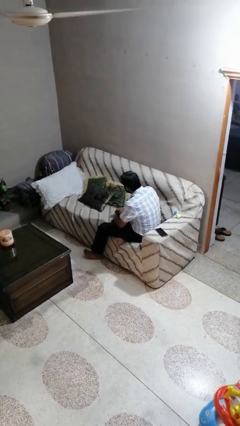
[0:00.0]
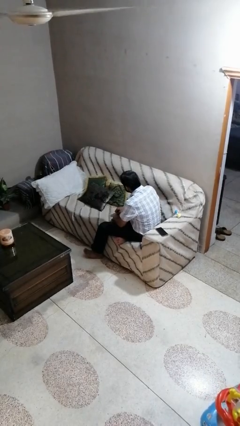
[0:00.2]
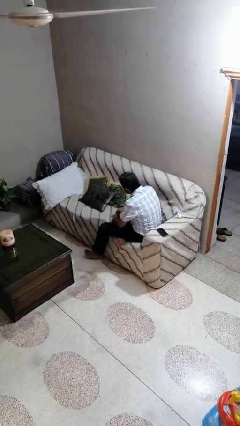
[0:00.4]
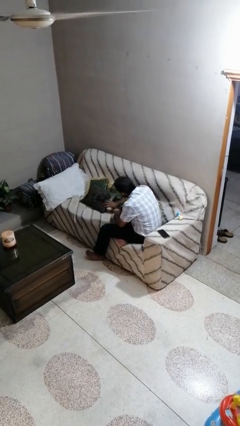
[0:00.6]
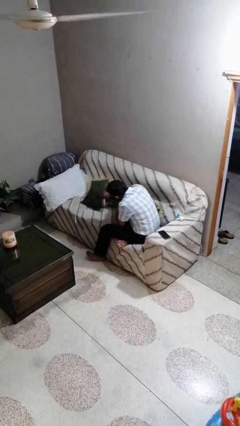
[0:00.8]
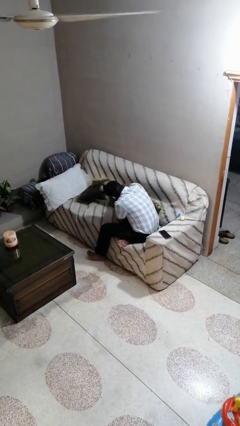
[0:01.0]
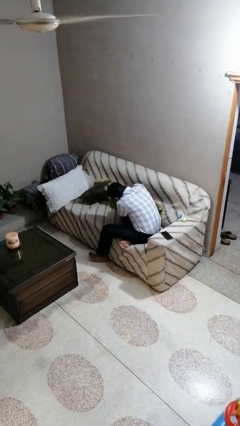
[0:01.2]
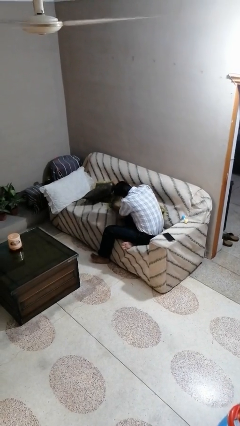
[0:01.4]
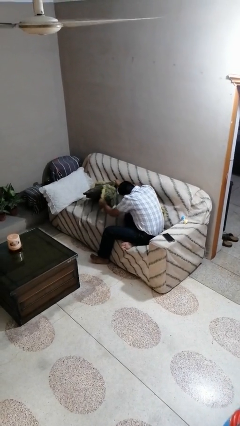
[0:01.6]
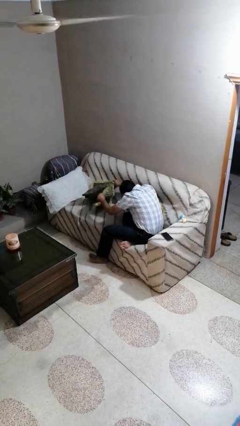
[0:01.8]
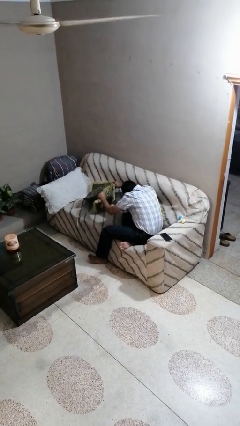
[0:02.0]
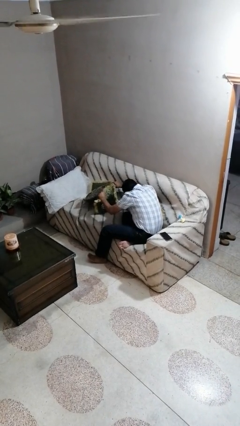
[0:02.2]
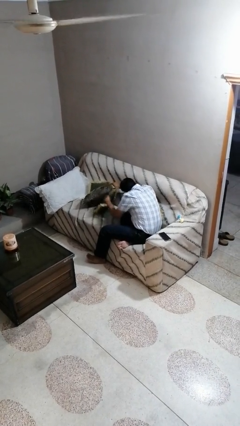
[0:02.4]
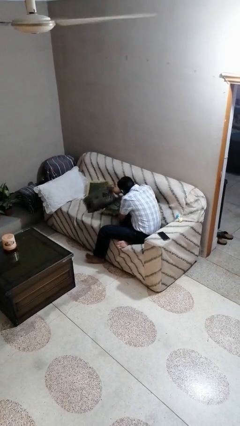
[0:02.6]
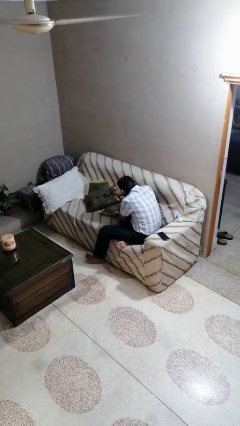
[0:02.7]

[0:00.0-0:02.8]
person searches in couch

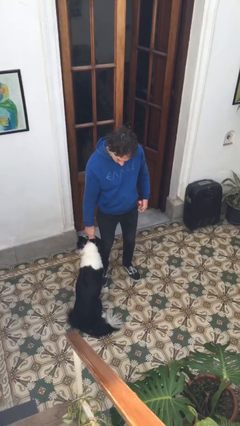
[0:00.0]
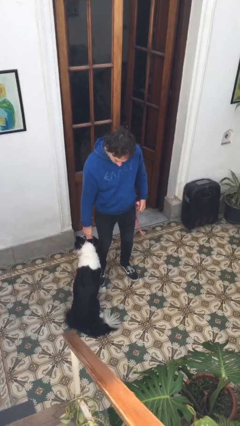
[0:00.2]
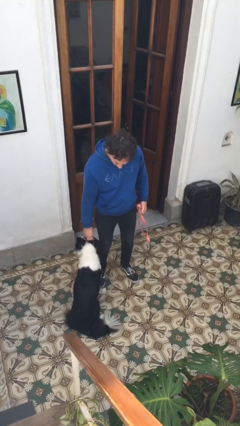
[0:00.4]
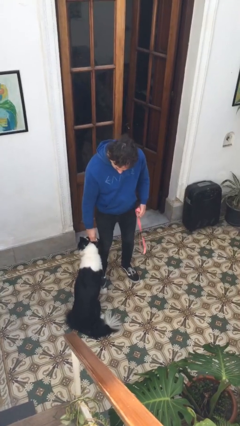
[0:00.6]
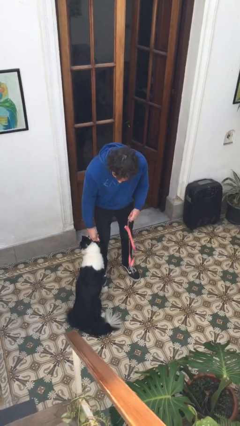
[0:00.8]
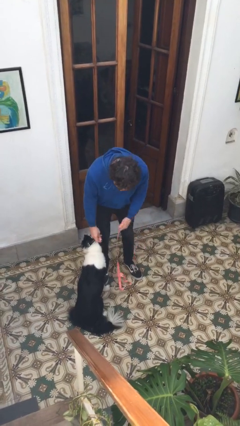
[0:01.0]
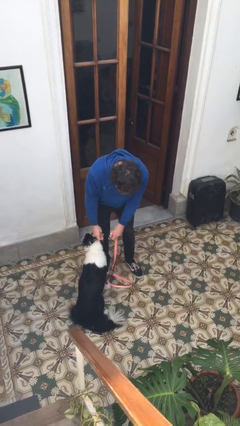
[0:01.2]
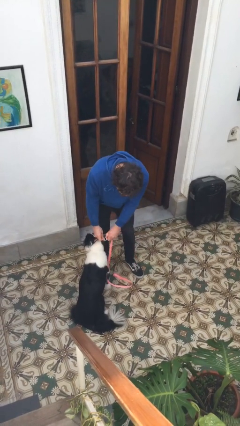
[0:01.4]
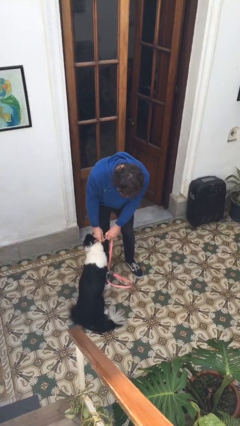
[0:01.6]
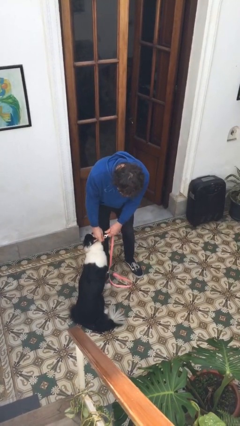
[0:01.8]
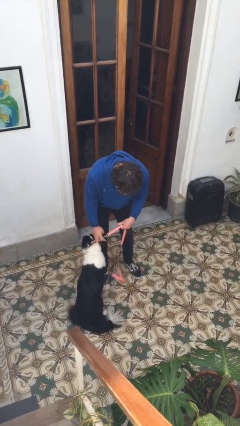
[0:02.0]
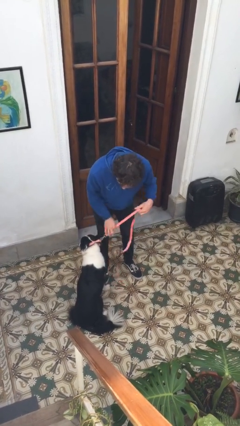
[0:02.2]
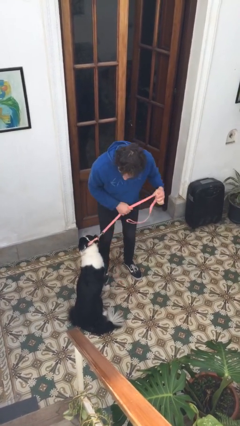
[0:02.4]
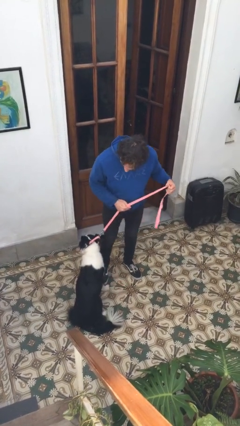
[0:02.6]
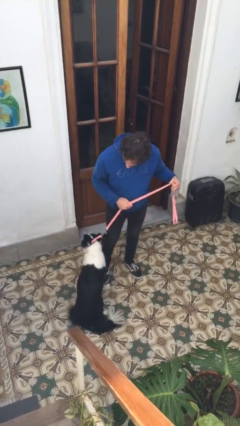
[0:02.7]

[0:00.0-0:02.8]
person attaches leash to dog

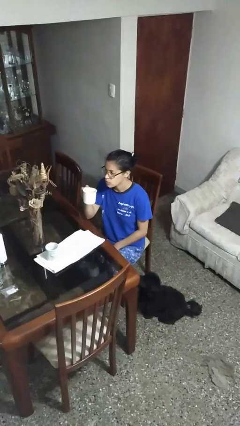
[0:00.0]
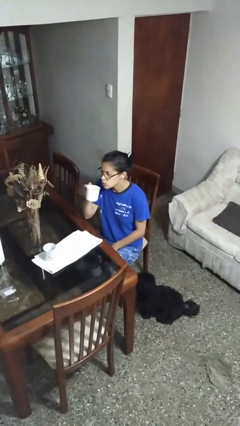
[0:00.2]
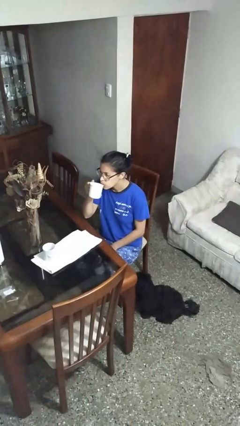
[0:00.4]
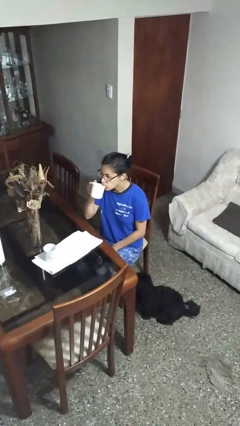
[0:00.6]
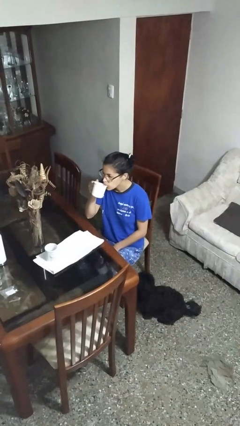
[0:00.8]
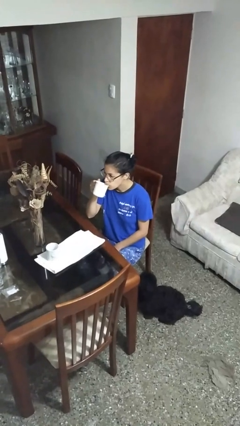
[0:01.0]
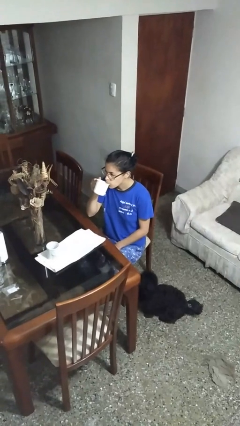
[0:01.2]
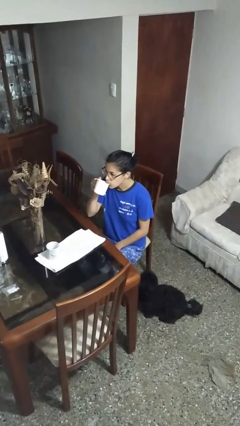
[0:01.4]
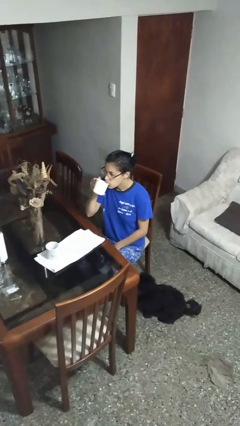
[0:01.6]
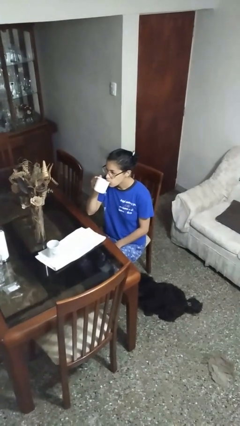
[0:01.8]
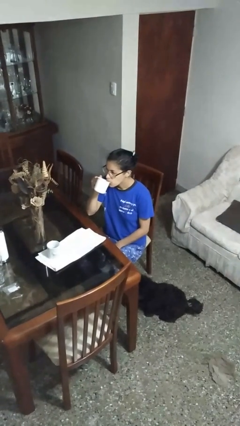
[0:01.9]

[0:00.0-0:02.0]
person drinks from mug

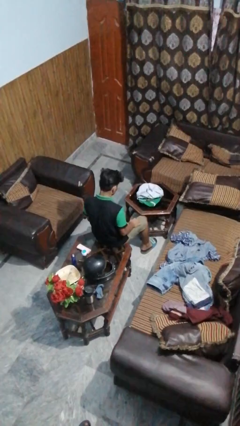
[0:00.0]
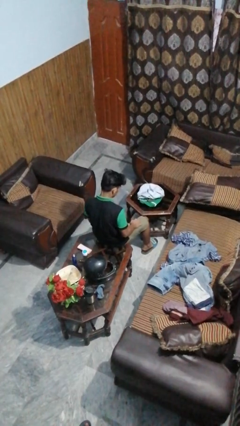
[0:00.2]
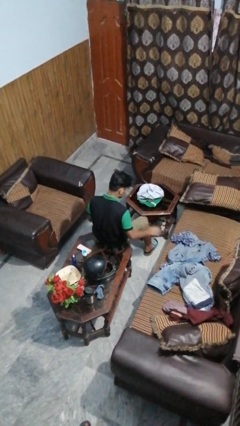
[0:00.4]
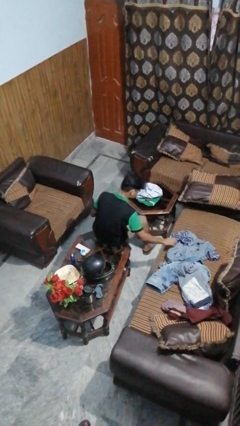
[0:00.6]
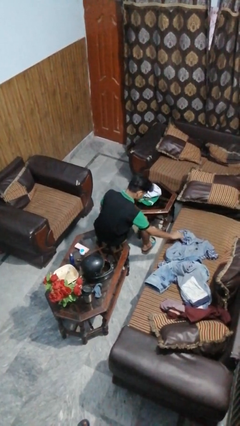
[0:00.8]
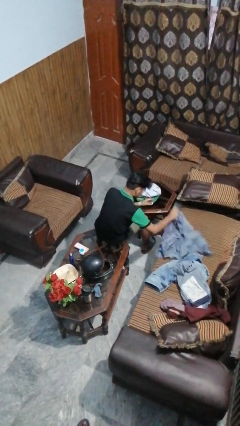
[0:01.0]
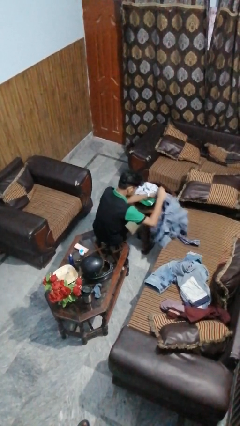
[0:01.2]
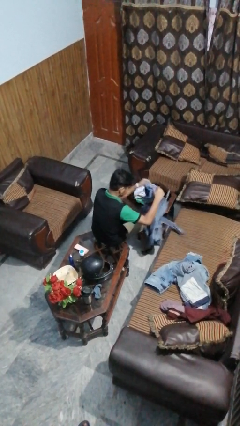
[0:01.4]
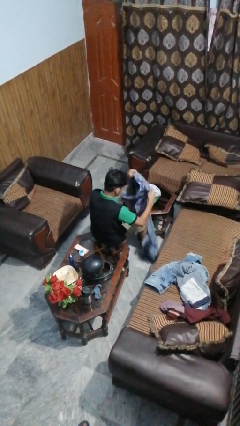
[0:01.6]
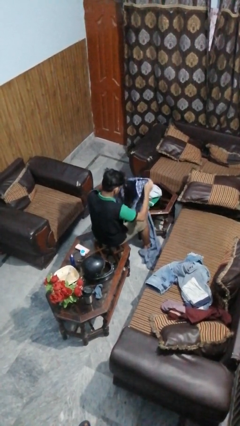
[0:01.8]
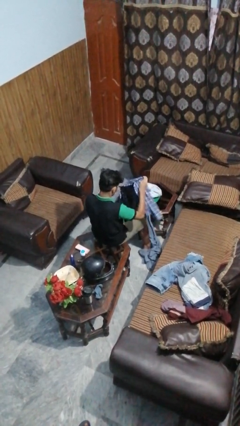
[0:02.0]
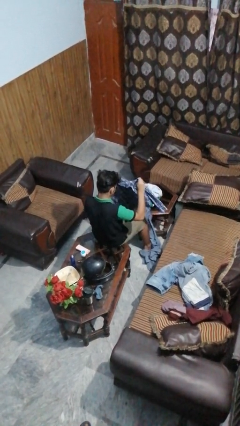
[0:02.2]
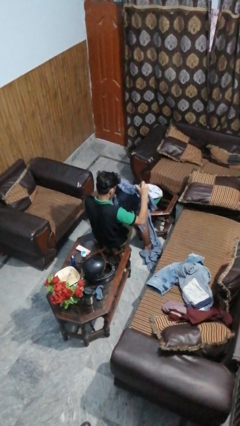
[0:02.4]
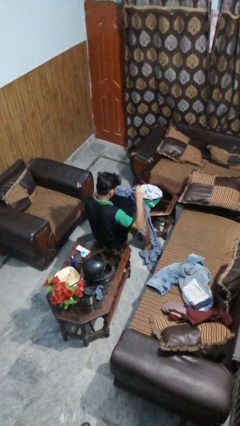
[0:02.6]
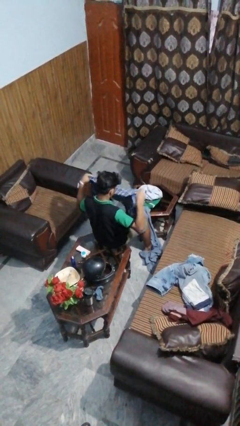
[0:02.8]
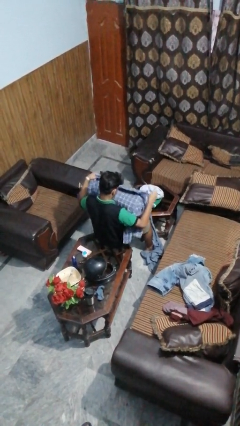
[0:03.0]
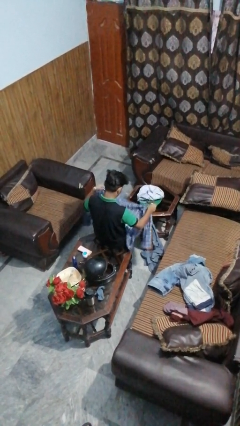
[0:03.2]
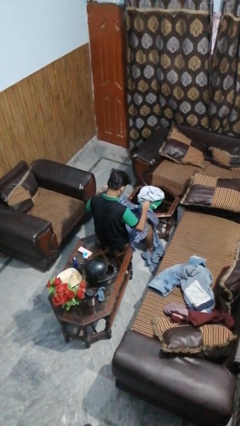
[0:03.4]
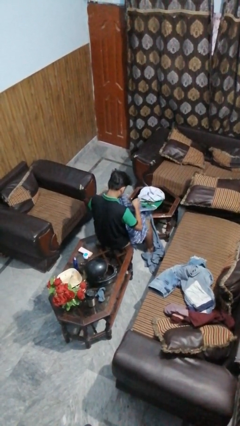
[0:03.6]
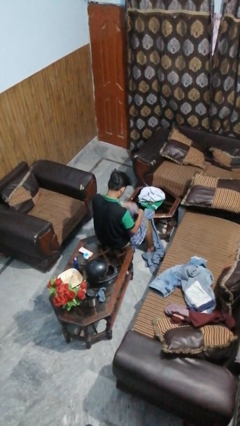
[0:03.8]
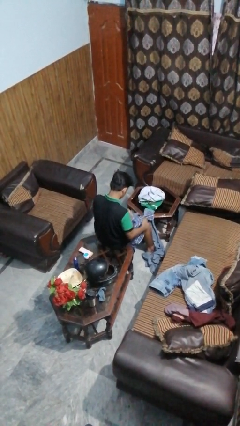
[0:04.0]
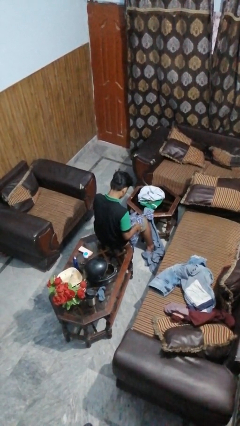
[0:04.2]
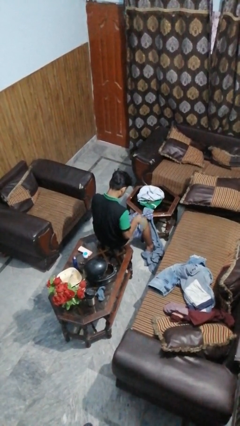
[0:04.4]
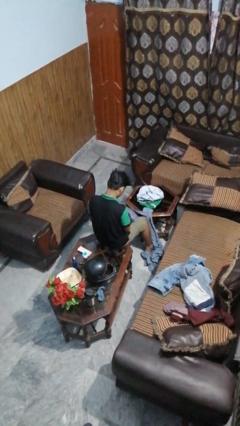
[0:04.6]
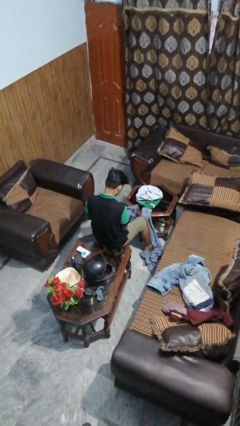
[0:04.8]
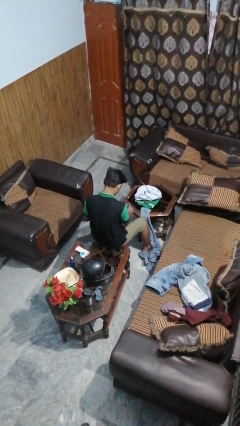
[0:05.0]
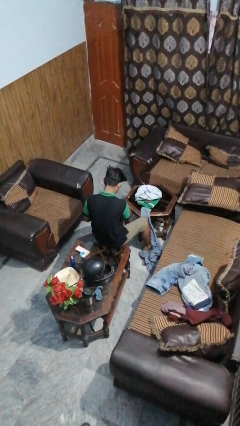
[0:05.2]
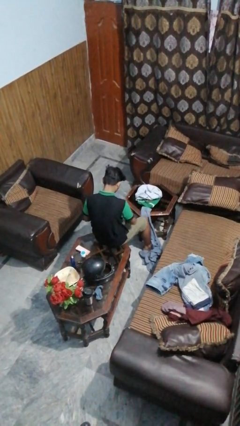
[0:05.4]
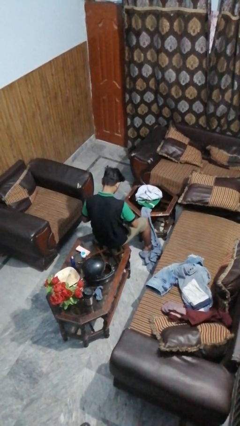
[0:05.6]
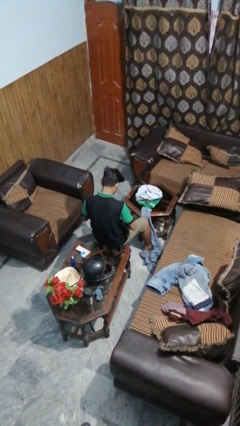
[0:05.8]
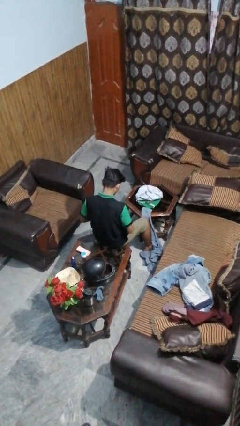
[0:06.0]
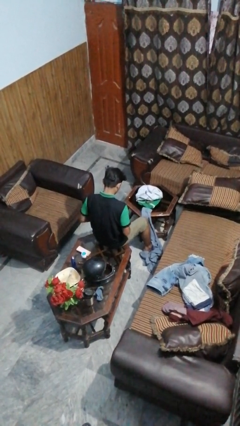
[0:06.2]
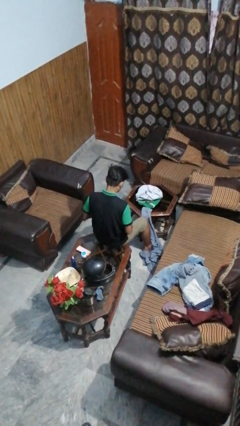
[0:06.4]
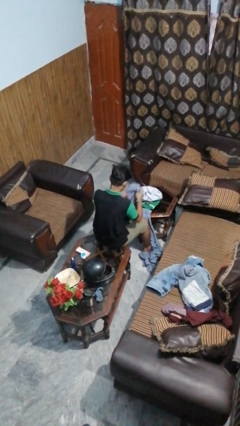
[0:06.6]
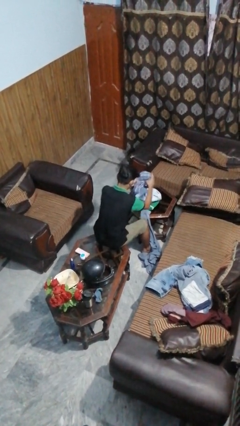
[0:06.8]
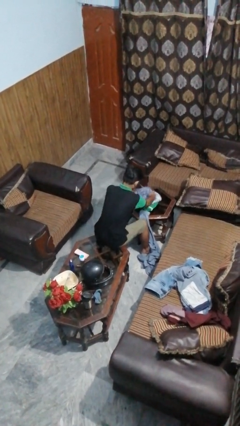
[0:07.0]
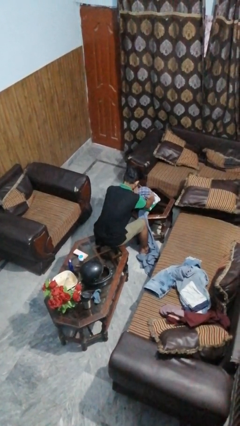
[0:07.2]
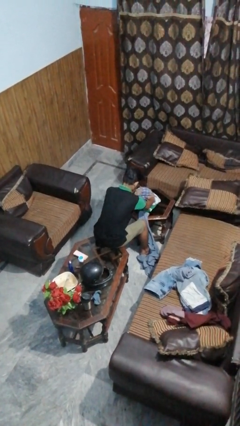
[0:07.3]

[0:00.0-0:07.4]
person folds shirt

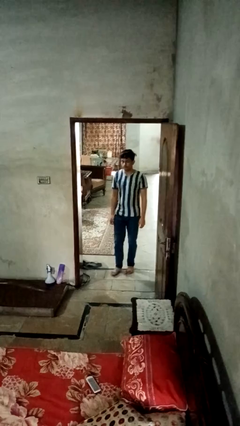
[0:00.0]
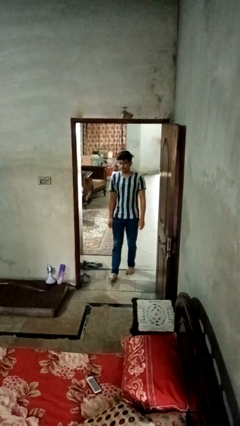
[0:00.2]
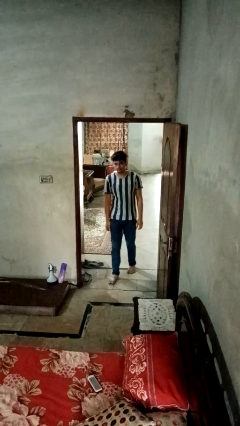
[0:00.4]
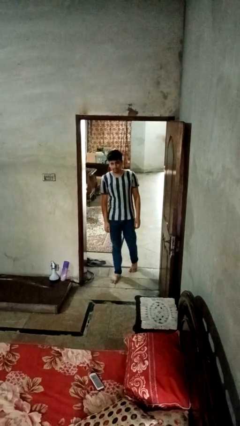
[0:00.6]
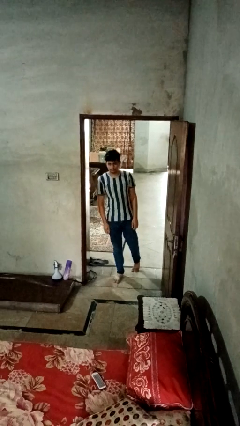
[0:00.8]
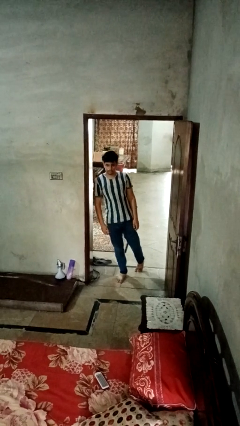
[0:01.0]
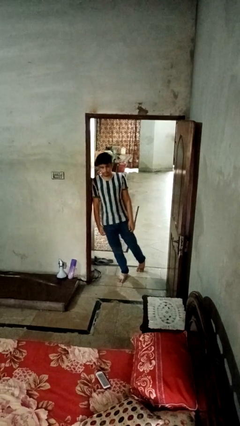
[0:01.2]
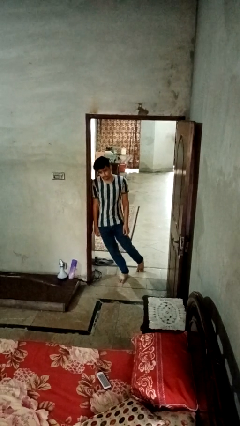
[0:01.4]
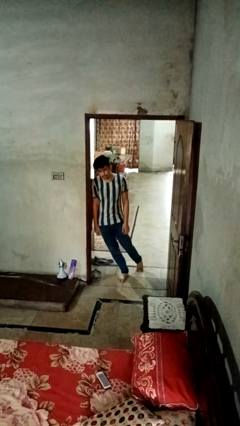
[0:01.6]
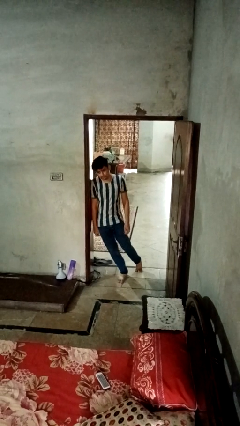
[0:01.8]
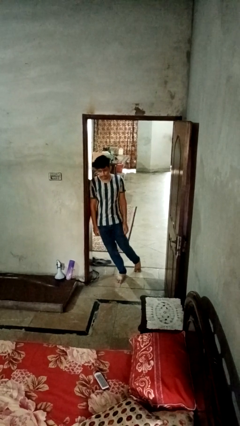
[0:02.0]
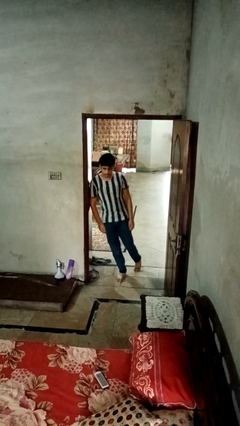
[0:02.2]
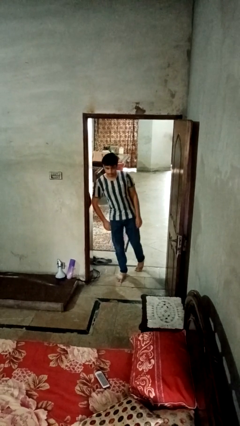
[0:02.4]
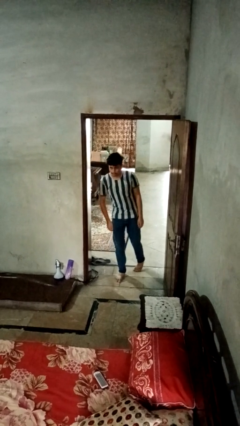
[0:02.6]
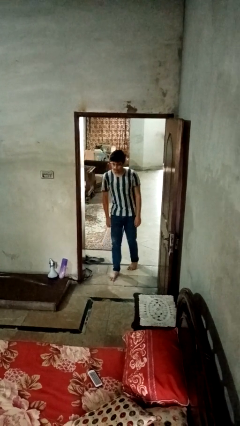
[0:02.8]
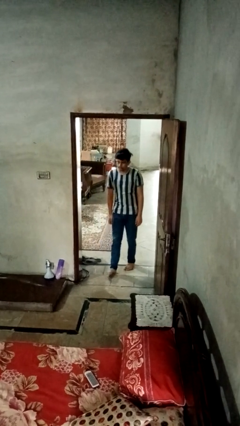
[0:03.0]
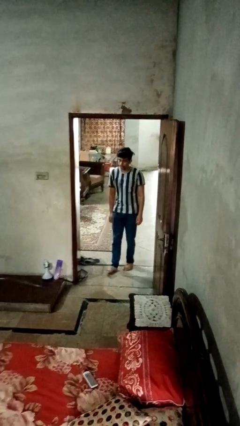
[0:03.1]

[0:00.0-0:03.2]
person bumps into wall
